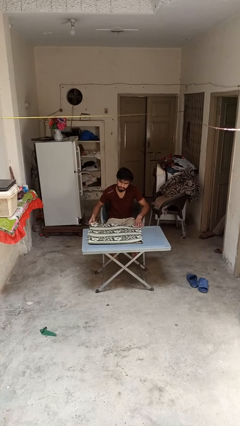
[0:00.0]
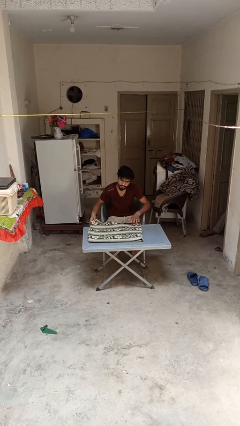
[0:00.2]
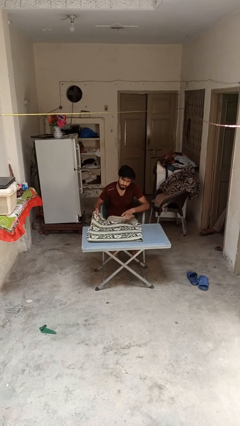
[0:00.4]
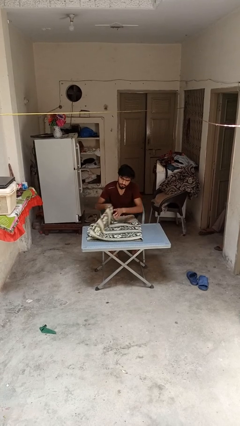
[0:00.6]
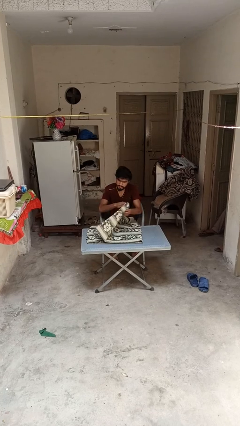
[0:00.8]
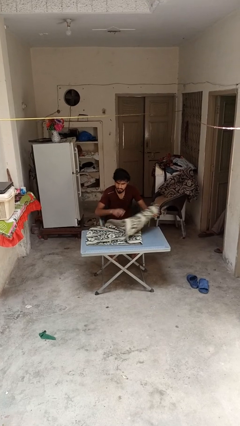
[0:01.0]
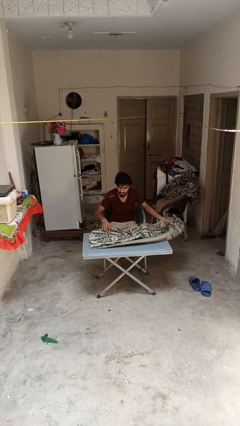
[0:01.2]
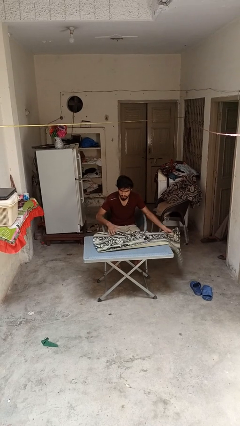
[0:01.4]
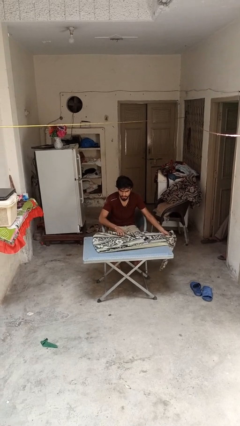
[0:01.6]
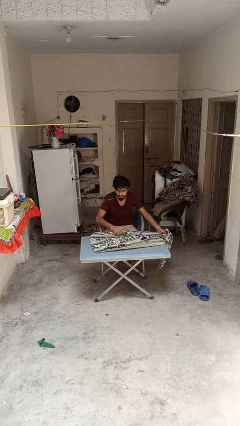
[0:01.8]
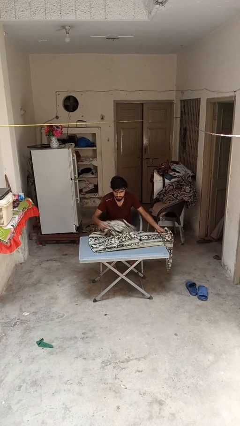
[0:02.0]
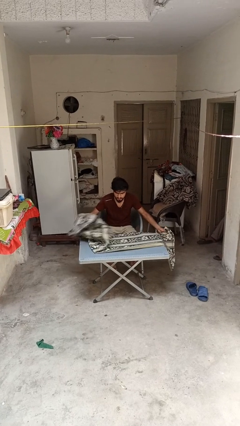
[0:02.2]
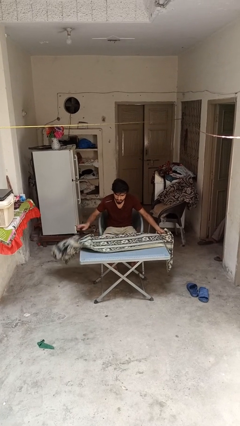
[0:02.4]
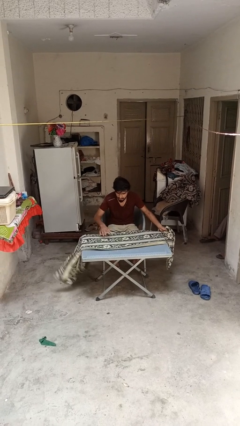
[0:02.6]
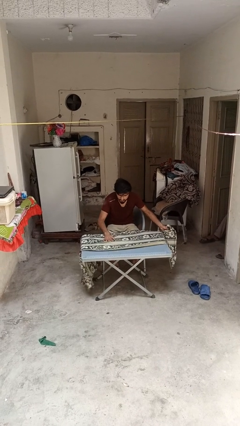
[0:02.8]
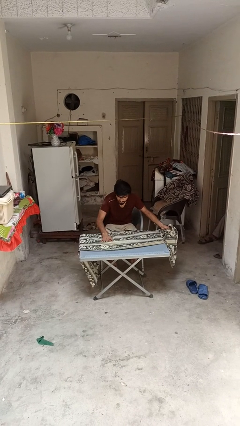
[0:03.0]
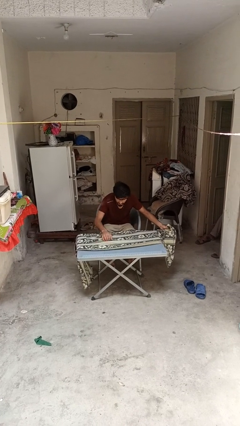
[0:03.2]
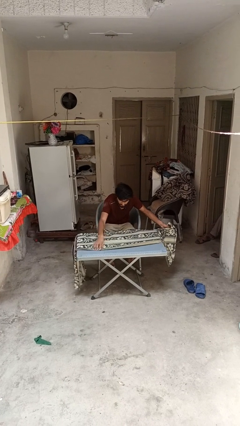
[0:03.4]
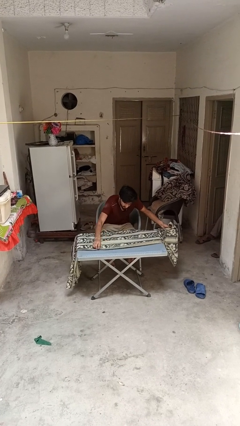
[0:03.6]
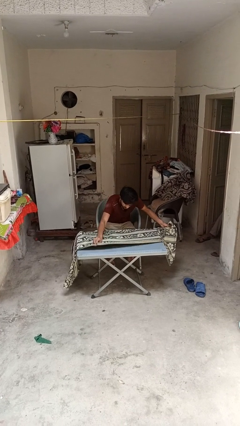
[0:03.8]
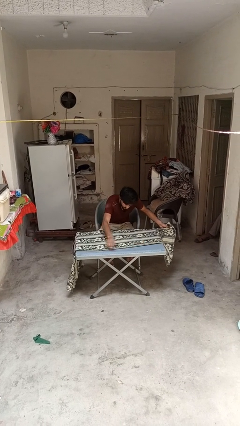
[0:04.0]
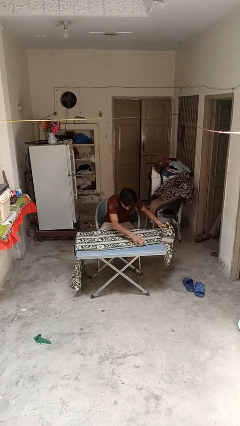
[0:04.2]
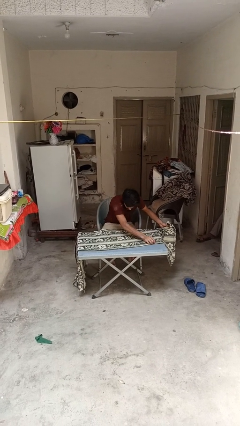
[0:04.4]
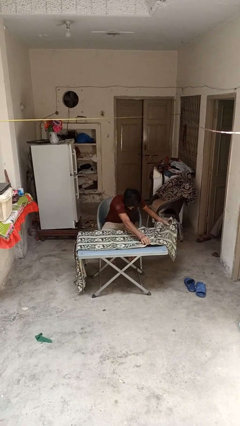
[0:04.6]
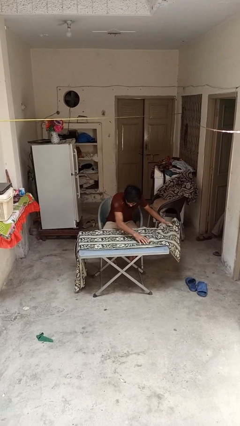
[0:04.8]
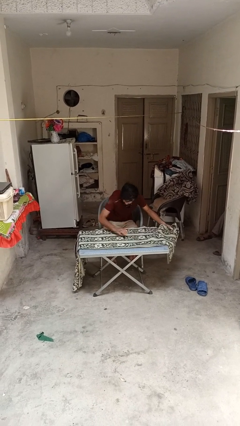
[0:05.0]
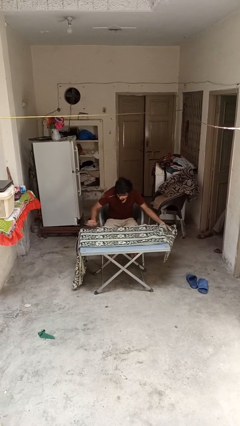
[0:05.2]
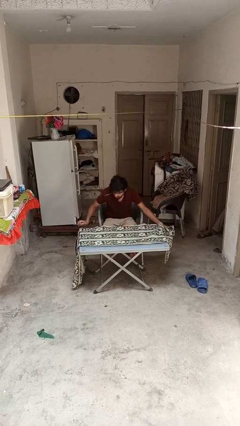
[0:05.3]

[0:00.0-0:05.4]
person spreads tablecloth

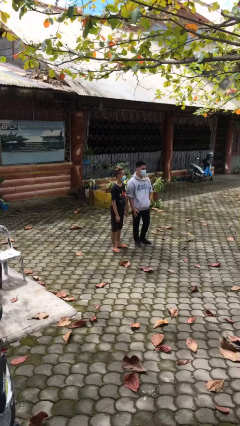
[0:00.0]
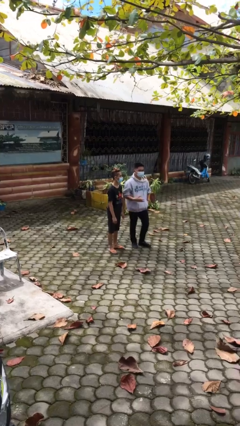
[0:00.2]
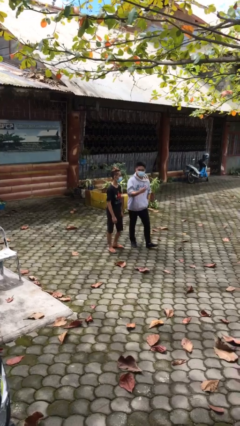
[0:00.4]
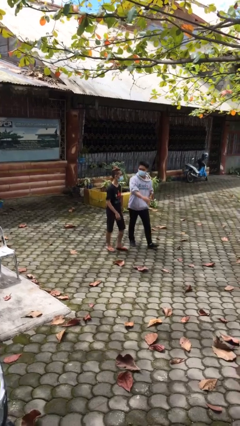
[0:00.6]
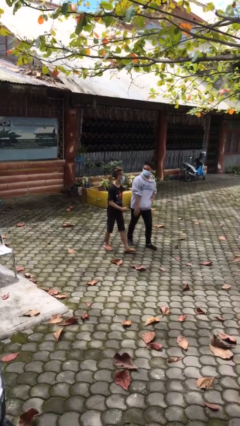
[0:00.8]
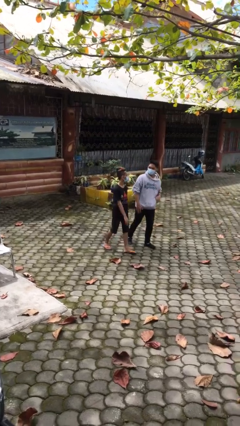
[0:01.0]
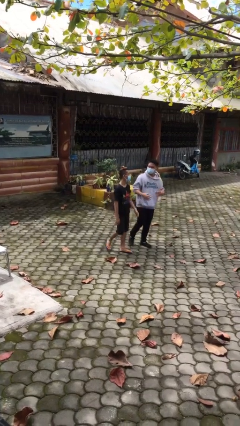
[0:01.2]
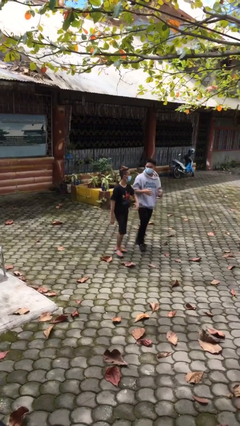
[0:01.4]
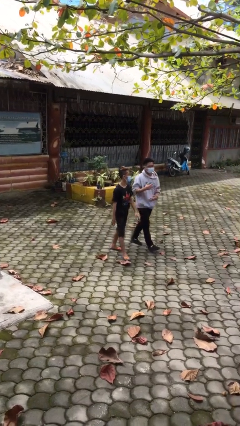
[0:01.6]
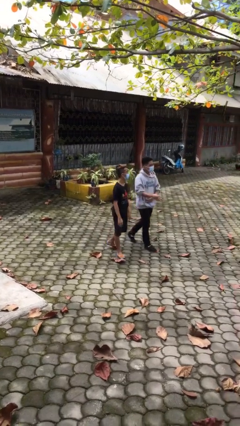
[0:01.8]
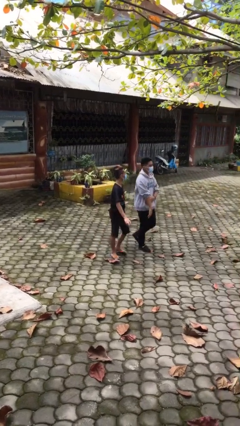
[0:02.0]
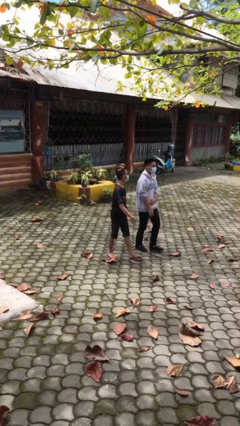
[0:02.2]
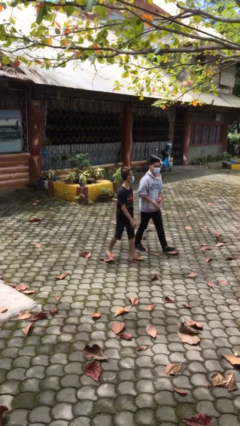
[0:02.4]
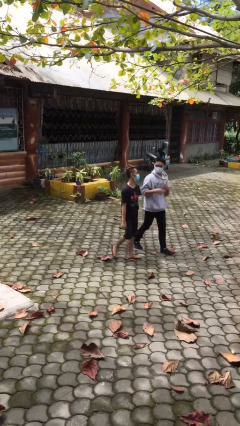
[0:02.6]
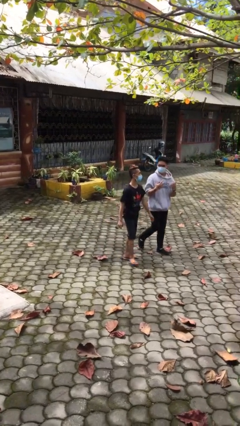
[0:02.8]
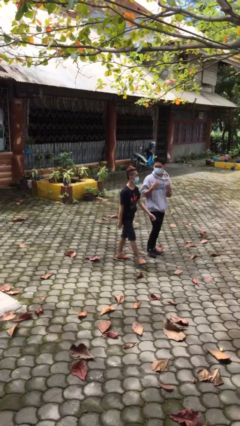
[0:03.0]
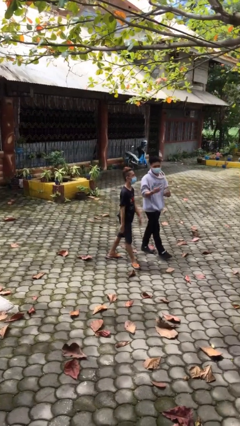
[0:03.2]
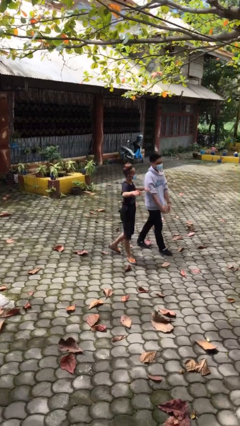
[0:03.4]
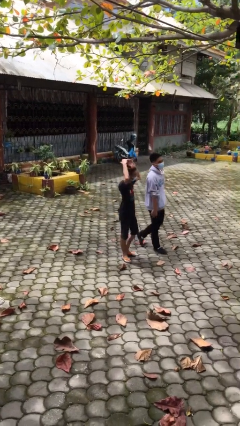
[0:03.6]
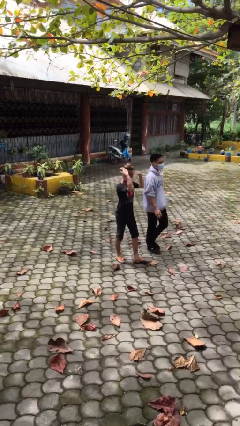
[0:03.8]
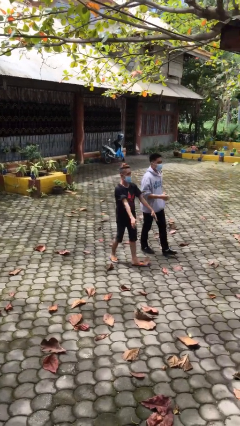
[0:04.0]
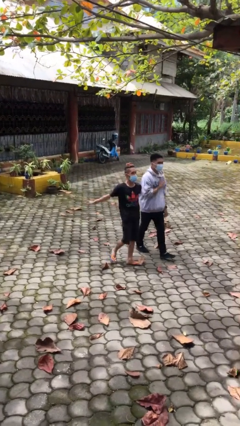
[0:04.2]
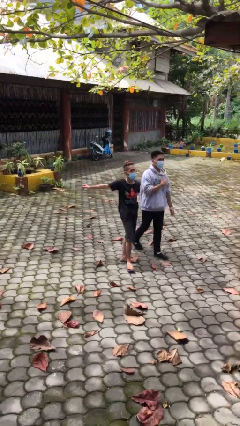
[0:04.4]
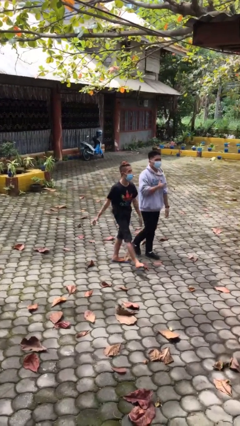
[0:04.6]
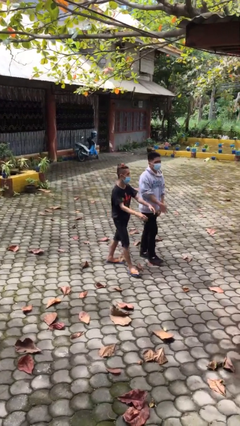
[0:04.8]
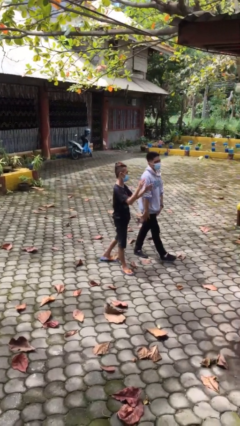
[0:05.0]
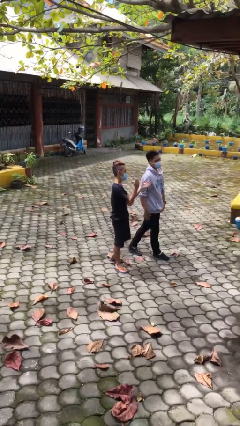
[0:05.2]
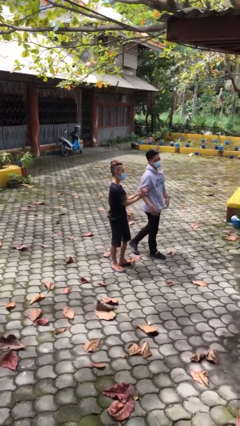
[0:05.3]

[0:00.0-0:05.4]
person talks to person

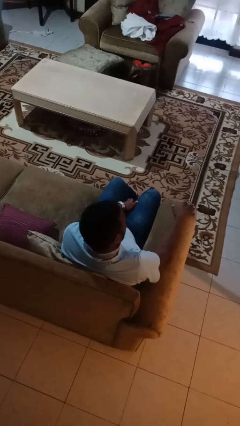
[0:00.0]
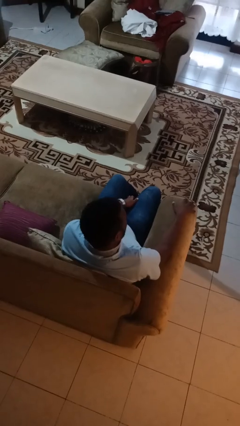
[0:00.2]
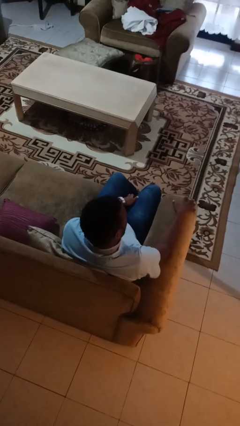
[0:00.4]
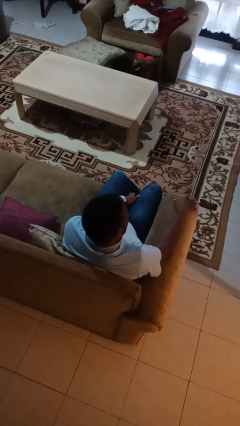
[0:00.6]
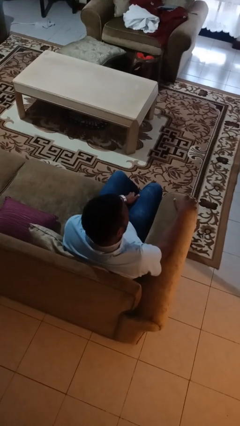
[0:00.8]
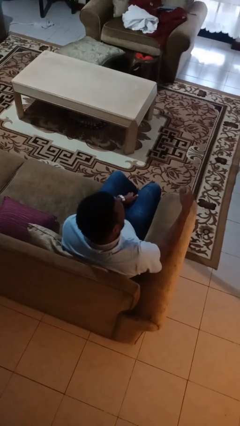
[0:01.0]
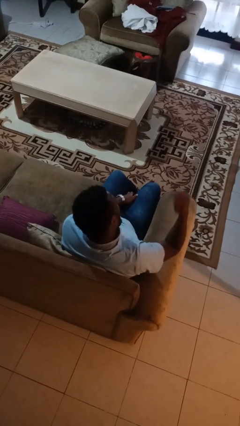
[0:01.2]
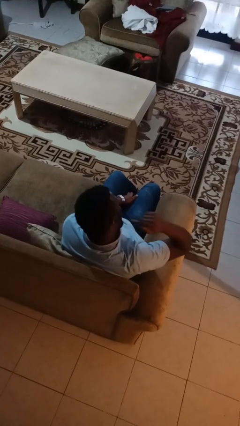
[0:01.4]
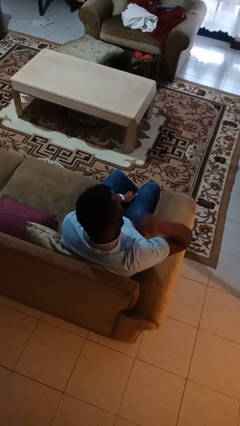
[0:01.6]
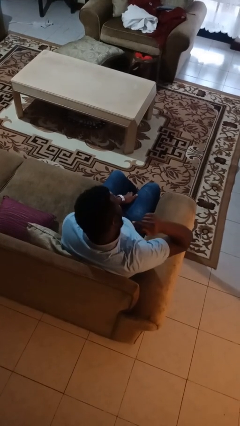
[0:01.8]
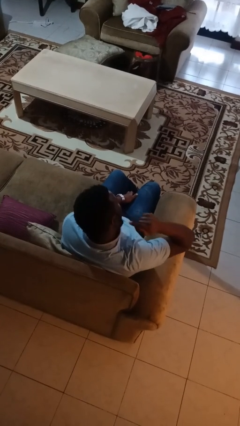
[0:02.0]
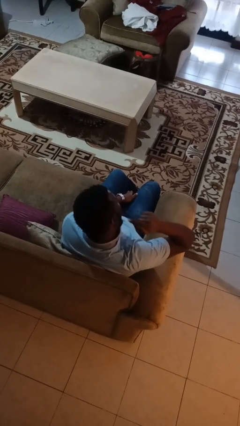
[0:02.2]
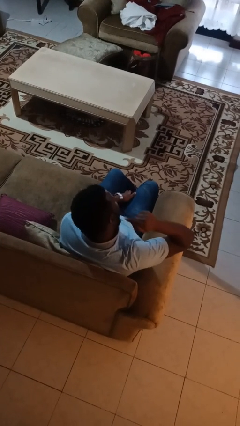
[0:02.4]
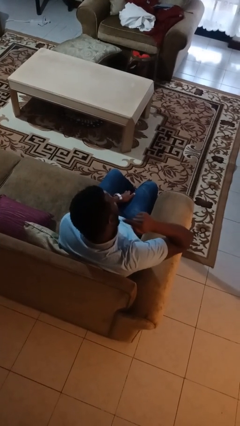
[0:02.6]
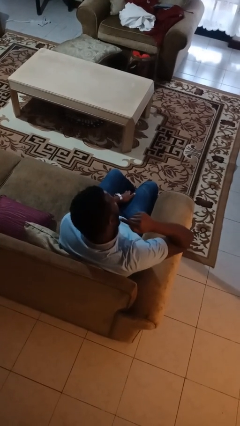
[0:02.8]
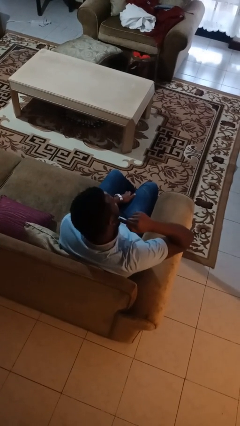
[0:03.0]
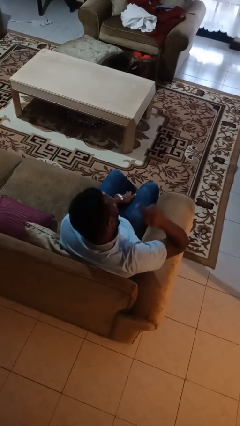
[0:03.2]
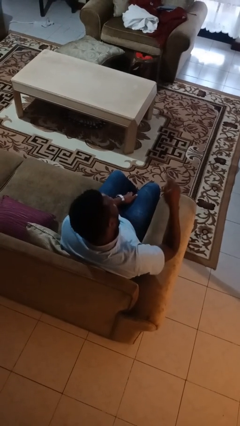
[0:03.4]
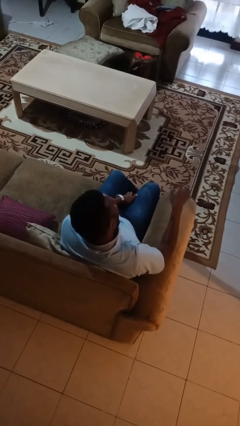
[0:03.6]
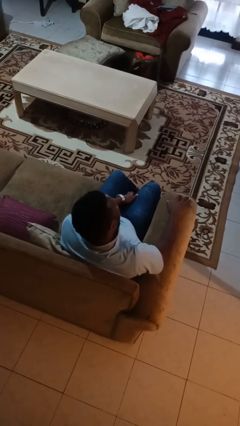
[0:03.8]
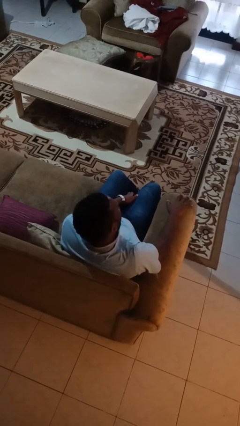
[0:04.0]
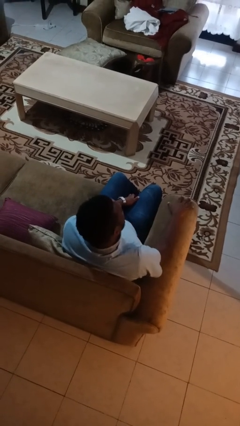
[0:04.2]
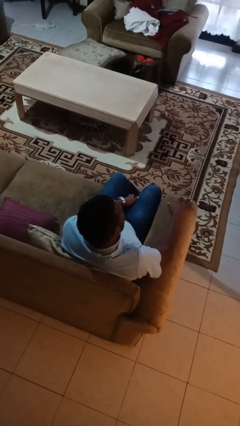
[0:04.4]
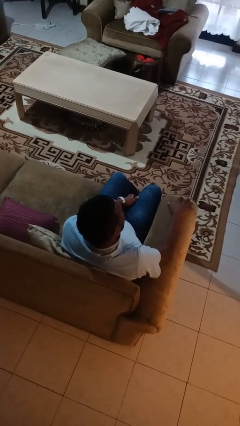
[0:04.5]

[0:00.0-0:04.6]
person gestures listen closely

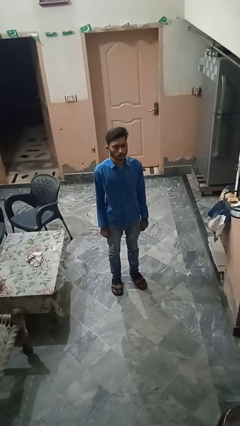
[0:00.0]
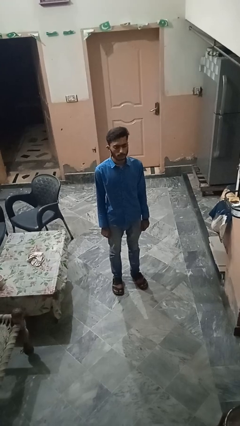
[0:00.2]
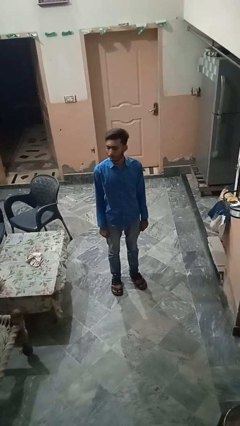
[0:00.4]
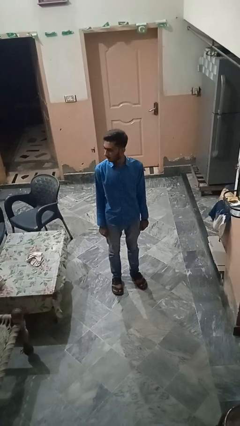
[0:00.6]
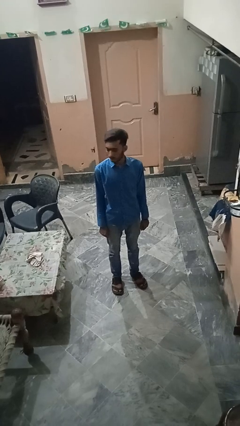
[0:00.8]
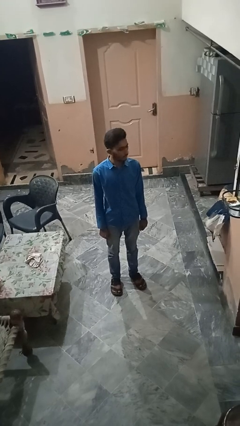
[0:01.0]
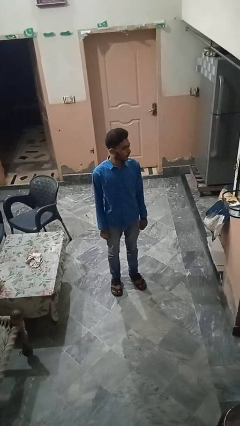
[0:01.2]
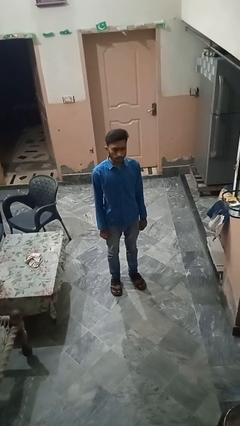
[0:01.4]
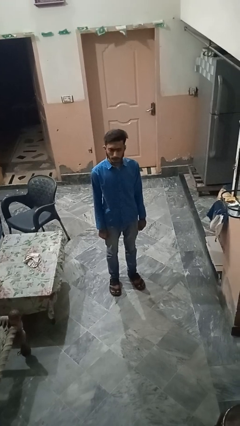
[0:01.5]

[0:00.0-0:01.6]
person shakes head

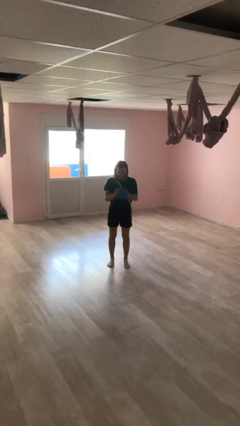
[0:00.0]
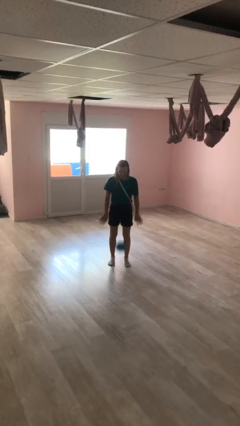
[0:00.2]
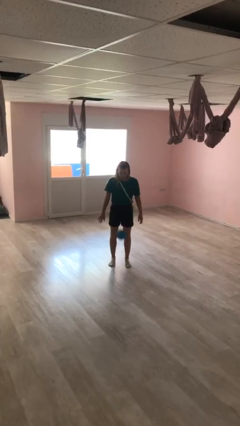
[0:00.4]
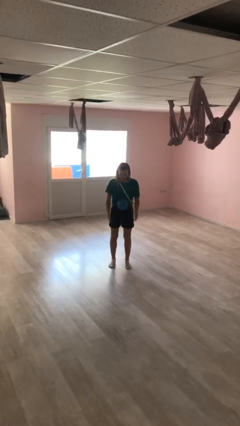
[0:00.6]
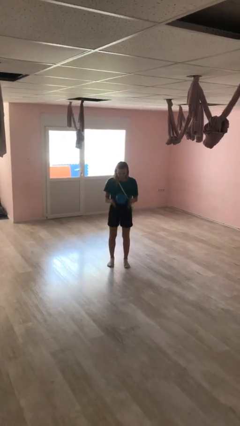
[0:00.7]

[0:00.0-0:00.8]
person bounces ball on floor
